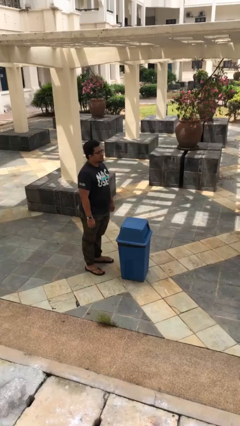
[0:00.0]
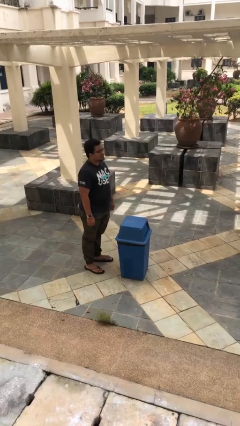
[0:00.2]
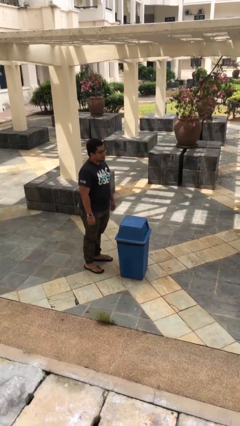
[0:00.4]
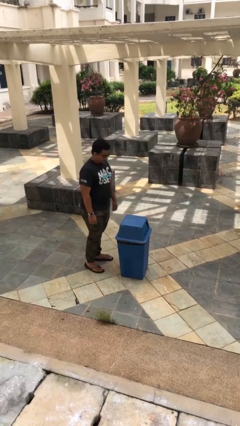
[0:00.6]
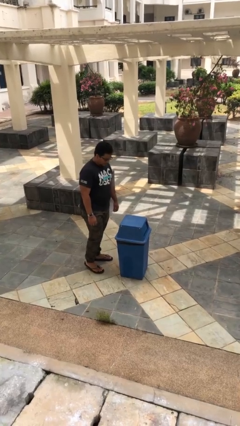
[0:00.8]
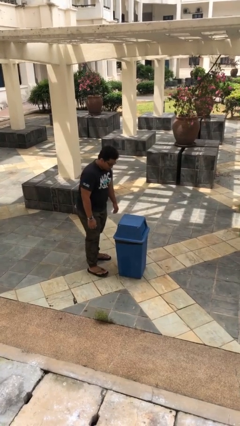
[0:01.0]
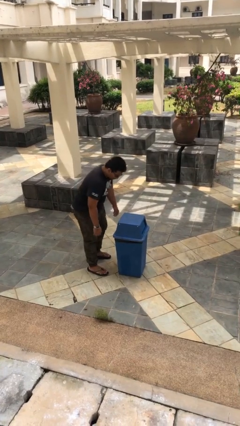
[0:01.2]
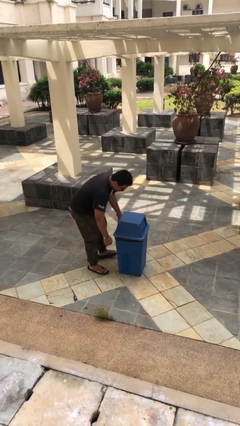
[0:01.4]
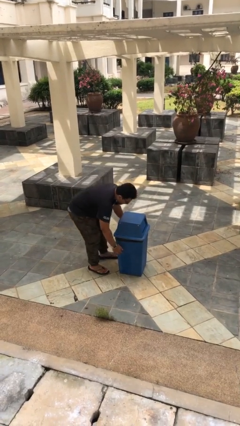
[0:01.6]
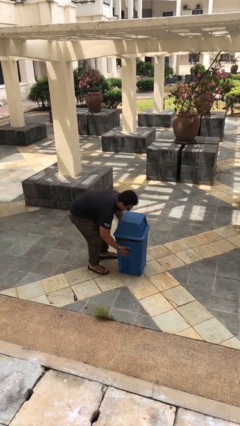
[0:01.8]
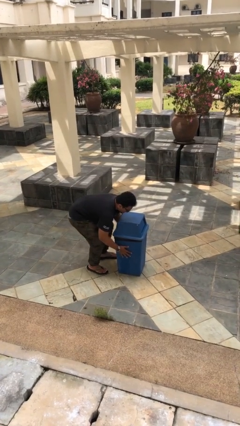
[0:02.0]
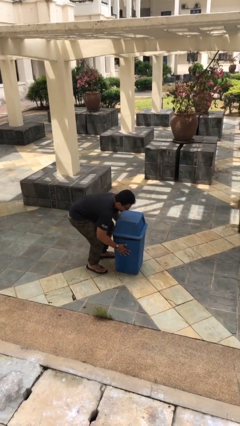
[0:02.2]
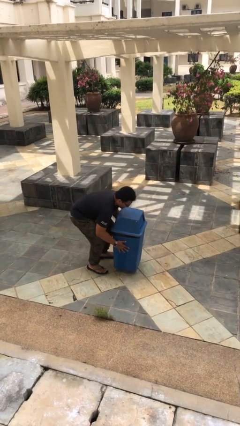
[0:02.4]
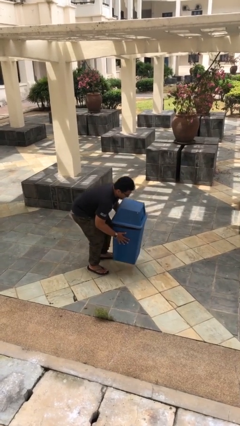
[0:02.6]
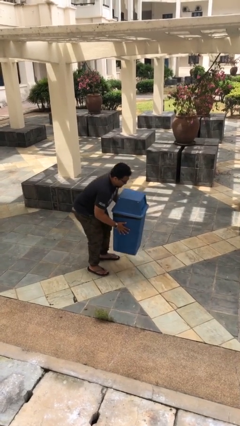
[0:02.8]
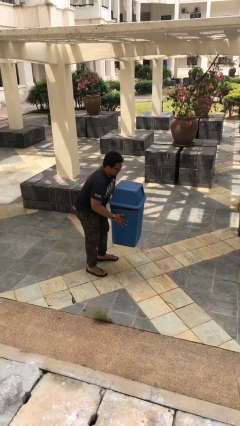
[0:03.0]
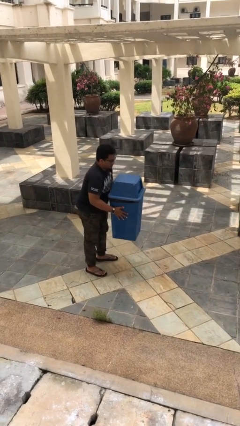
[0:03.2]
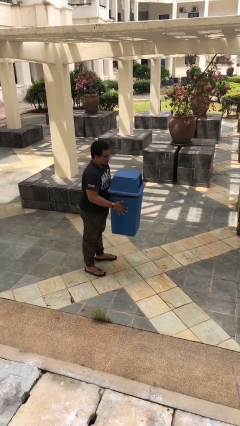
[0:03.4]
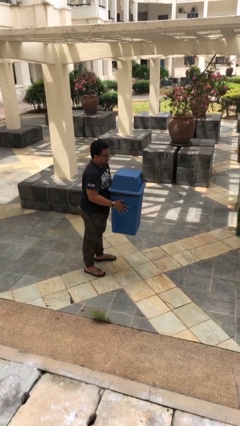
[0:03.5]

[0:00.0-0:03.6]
person picks up object from floor

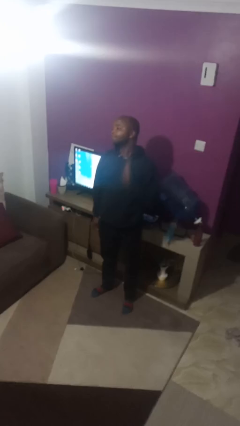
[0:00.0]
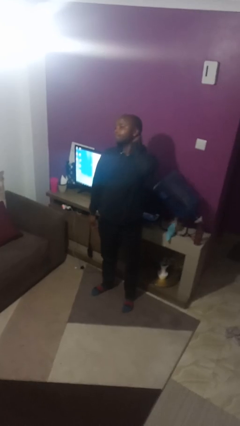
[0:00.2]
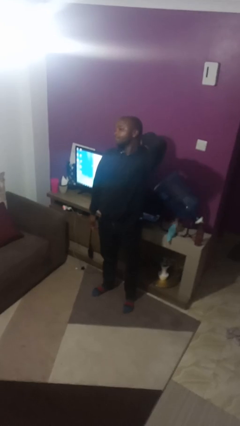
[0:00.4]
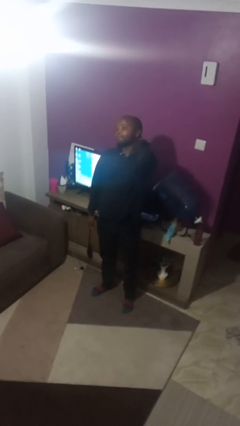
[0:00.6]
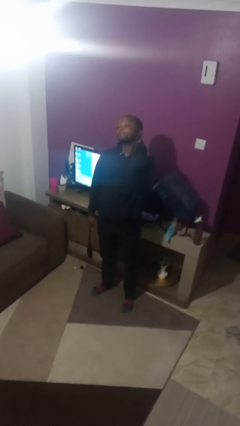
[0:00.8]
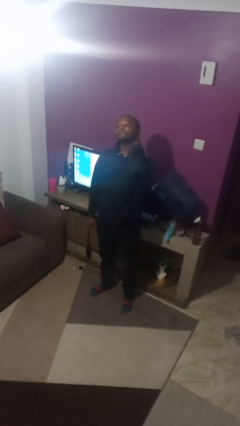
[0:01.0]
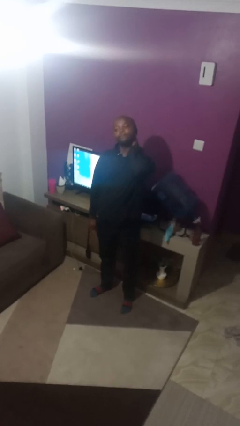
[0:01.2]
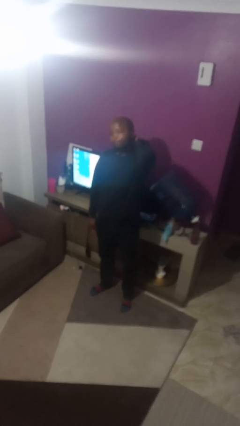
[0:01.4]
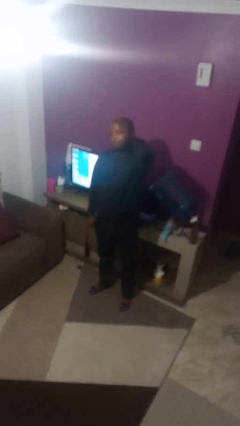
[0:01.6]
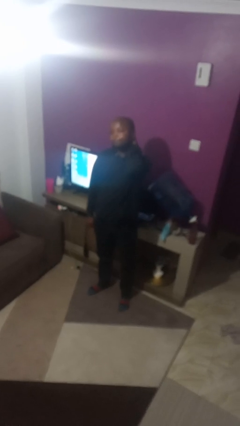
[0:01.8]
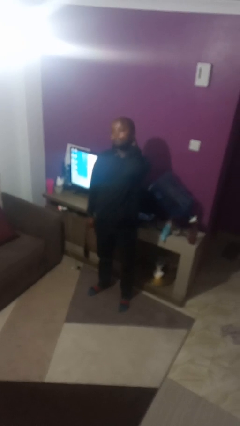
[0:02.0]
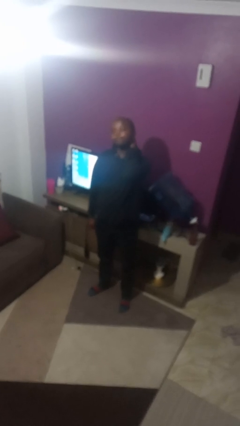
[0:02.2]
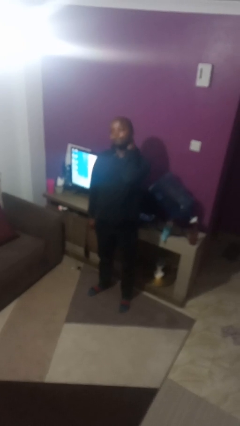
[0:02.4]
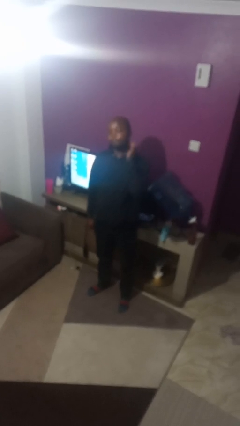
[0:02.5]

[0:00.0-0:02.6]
person rubs neck

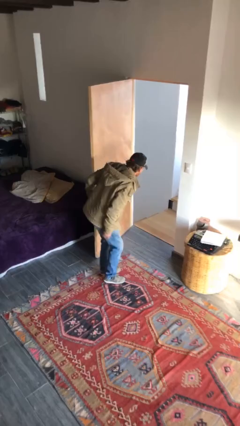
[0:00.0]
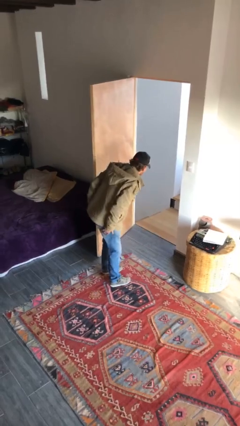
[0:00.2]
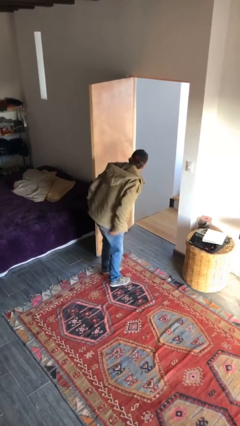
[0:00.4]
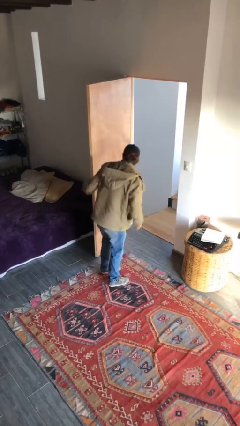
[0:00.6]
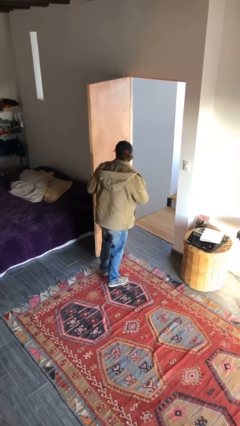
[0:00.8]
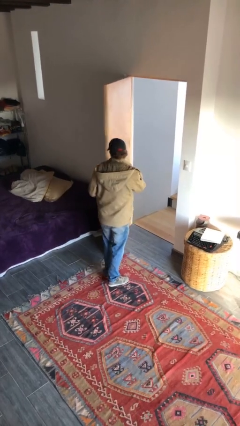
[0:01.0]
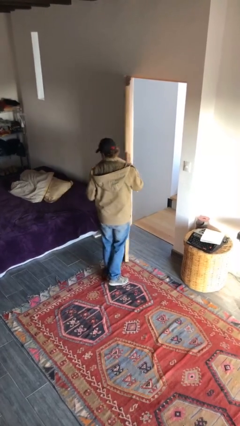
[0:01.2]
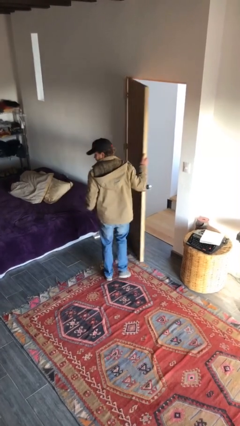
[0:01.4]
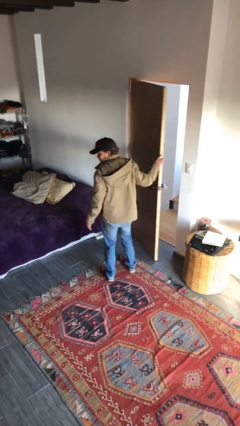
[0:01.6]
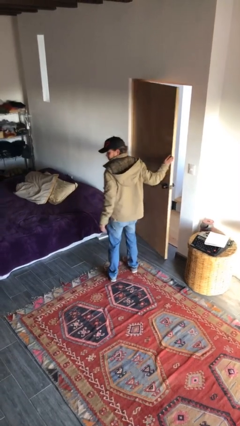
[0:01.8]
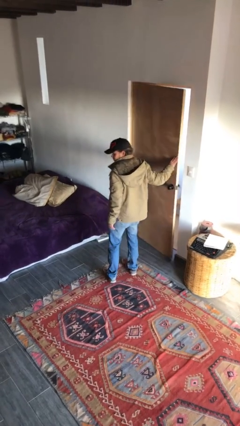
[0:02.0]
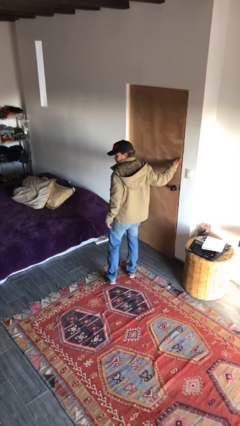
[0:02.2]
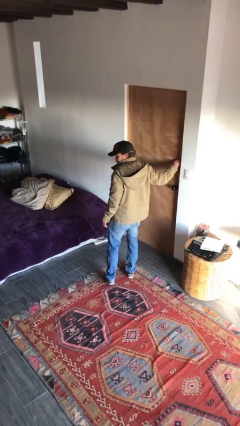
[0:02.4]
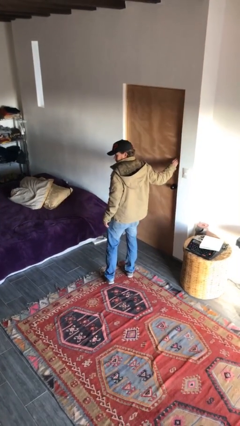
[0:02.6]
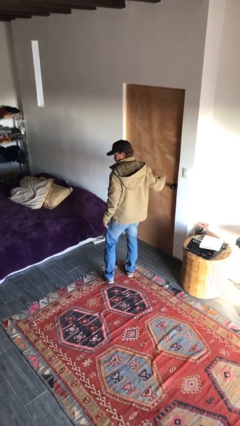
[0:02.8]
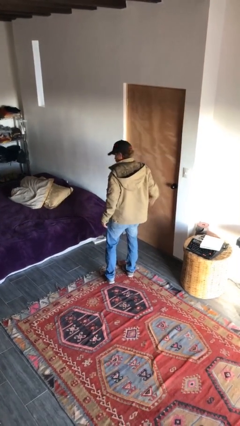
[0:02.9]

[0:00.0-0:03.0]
person closes facility door

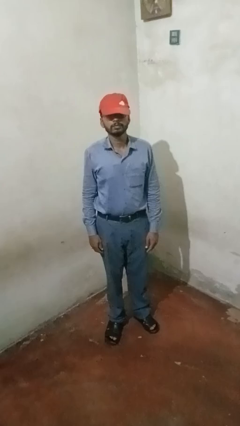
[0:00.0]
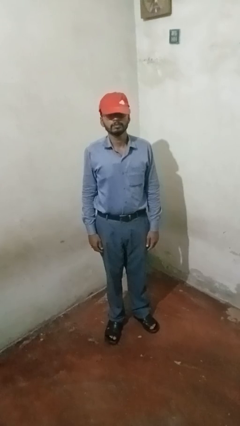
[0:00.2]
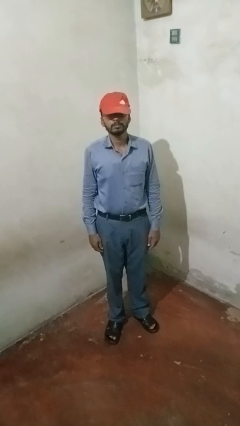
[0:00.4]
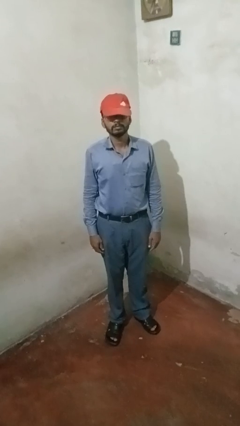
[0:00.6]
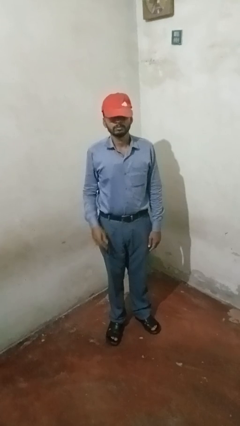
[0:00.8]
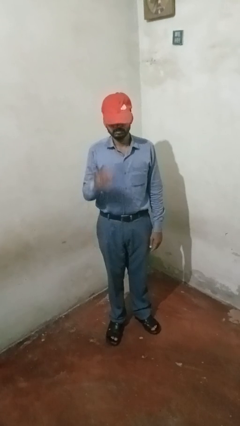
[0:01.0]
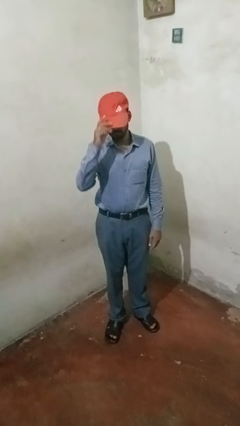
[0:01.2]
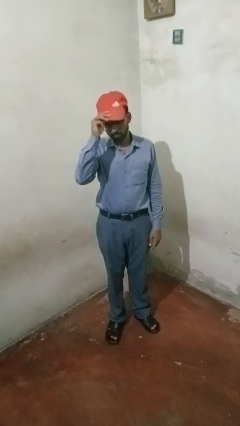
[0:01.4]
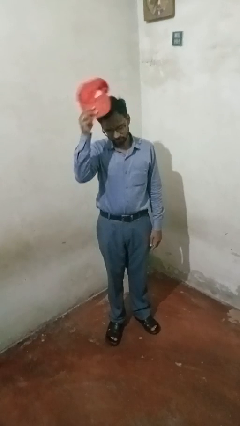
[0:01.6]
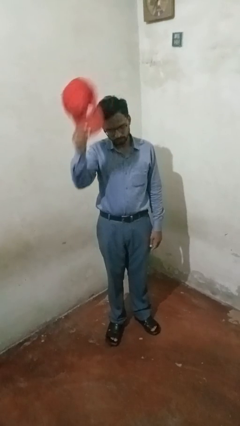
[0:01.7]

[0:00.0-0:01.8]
person takes off hat

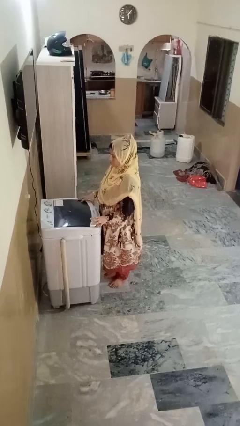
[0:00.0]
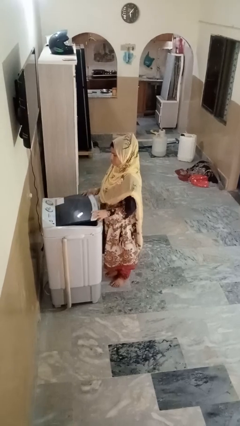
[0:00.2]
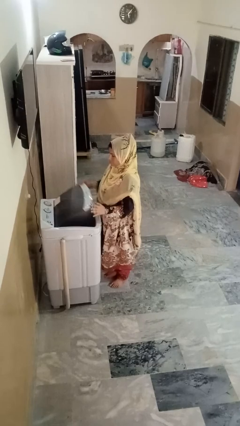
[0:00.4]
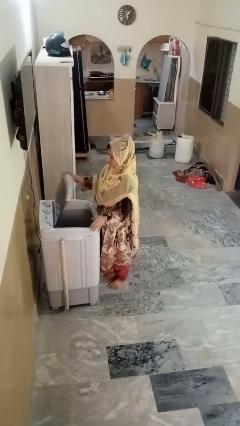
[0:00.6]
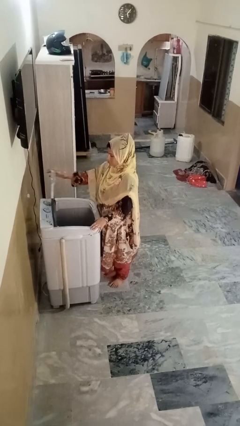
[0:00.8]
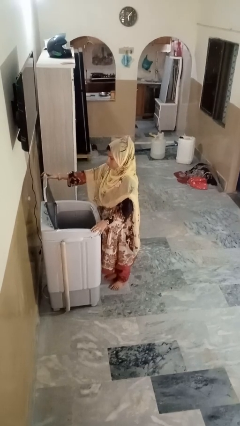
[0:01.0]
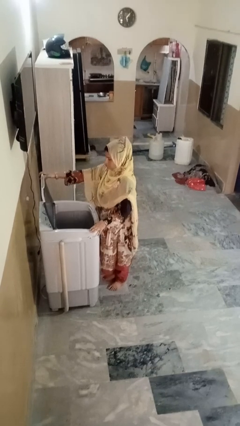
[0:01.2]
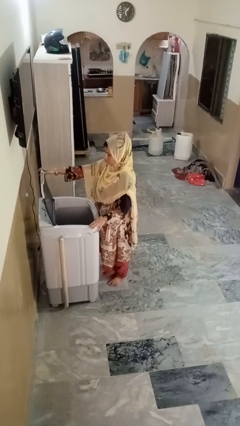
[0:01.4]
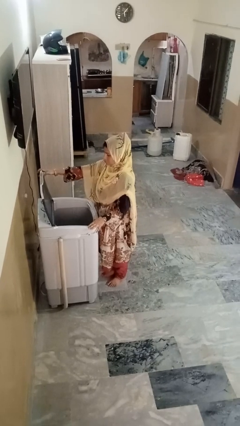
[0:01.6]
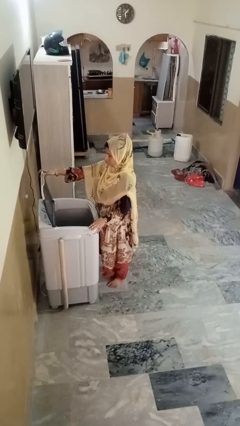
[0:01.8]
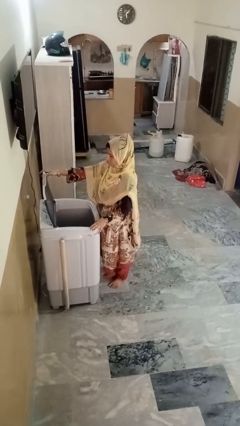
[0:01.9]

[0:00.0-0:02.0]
person opens clothes washer

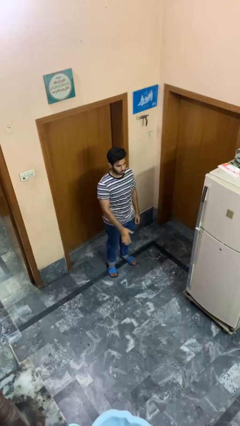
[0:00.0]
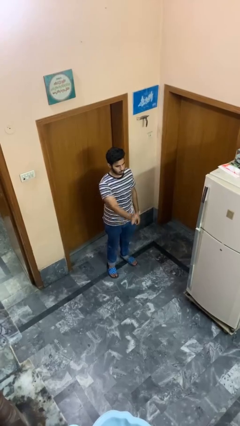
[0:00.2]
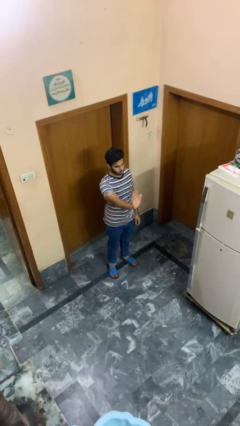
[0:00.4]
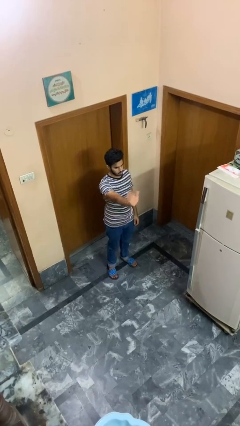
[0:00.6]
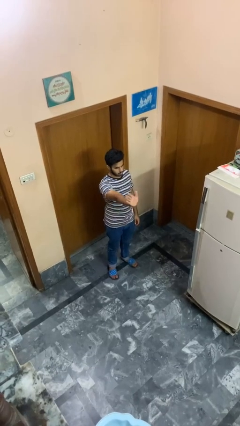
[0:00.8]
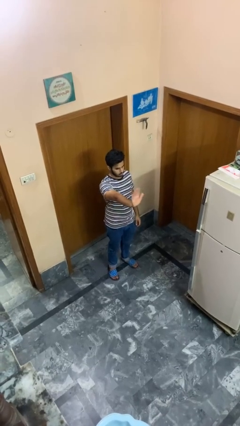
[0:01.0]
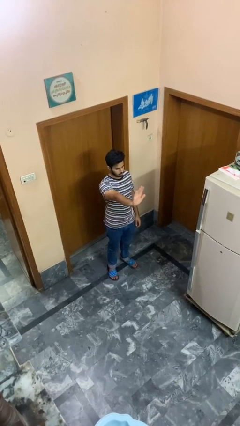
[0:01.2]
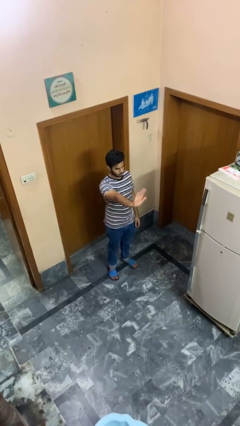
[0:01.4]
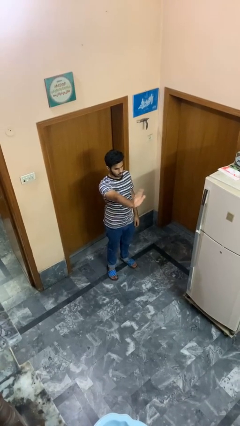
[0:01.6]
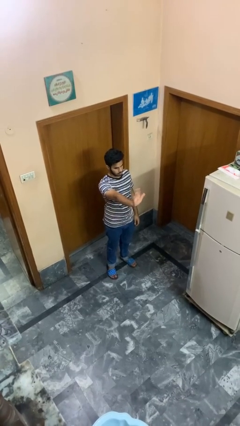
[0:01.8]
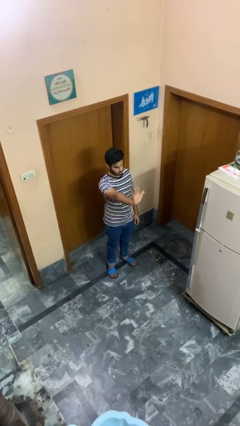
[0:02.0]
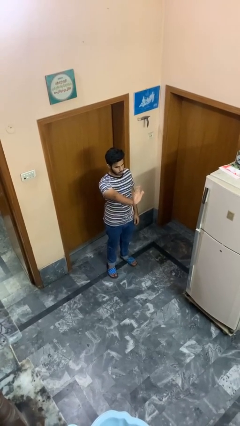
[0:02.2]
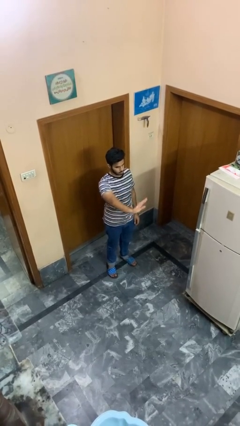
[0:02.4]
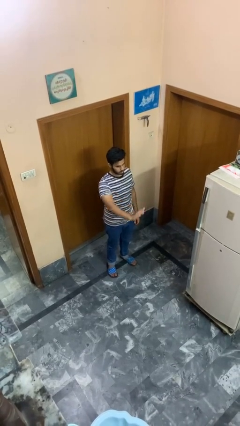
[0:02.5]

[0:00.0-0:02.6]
person waves at person

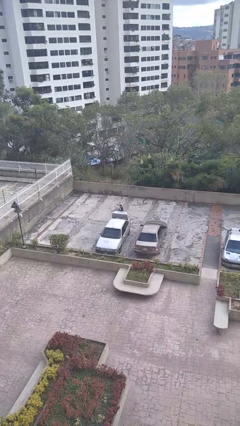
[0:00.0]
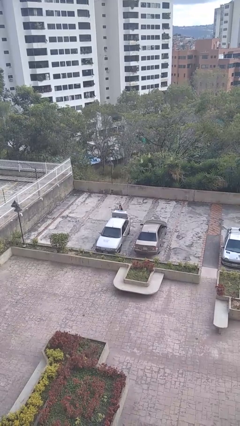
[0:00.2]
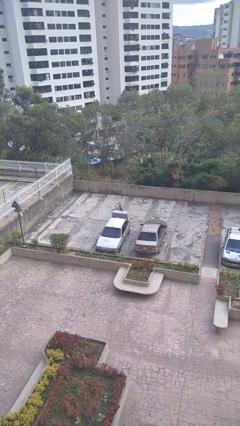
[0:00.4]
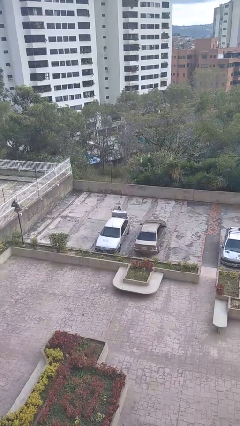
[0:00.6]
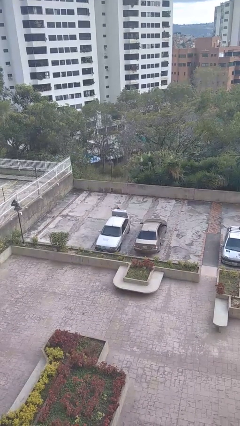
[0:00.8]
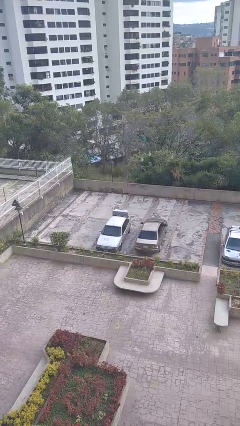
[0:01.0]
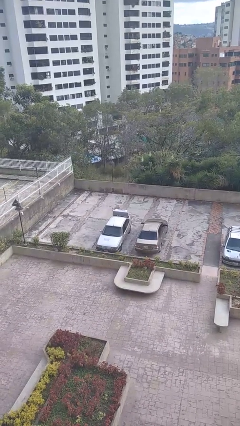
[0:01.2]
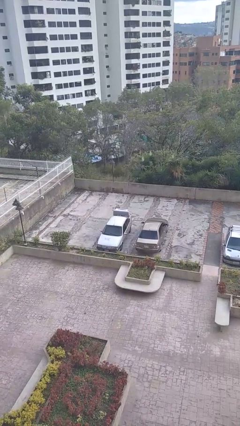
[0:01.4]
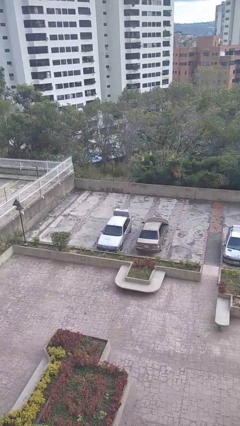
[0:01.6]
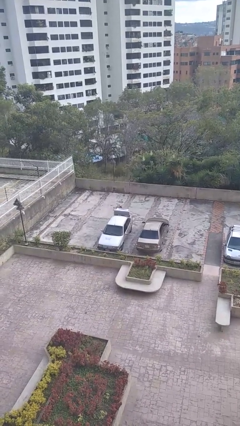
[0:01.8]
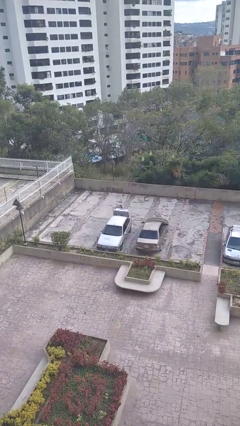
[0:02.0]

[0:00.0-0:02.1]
person loads car
